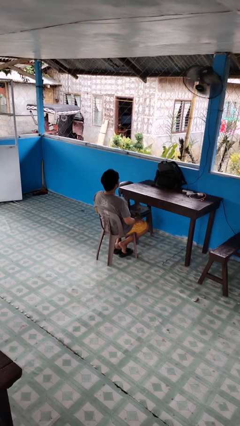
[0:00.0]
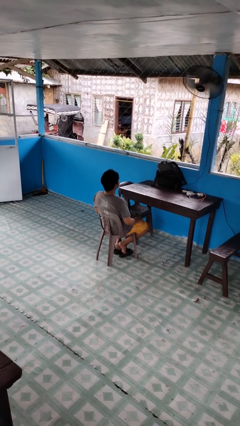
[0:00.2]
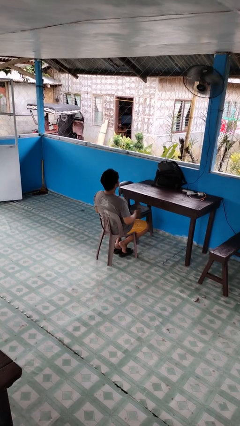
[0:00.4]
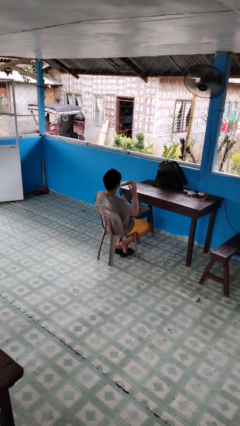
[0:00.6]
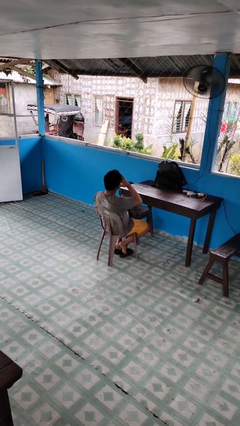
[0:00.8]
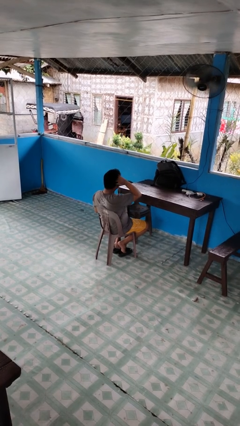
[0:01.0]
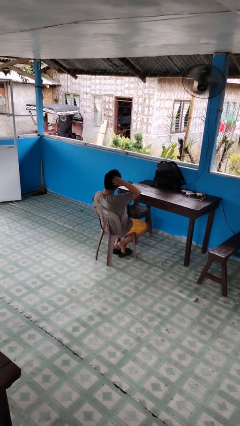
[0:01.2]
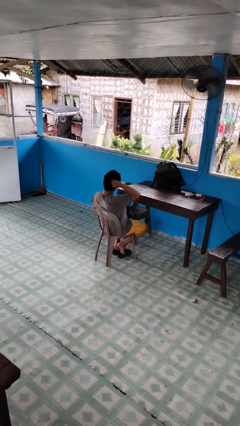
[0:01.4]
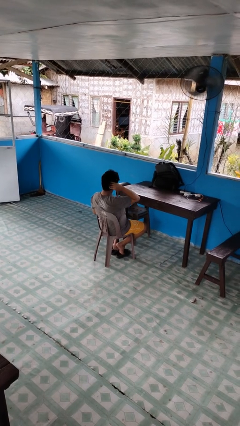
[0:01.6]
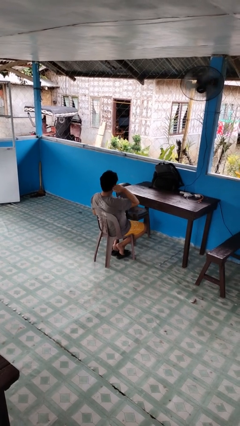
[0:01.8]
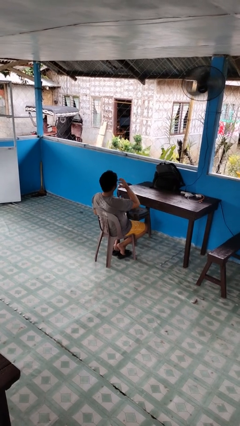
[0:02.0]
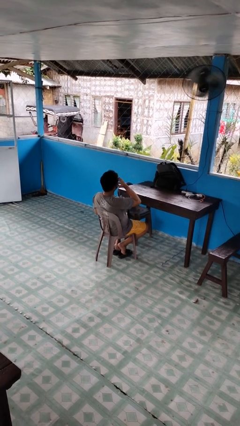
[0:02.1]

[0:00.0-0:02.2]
person strokes hair

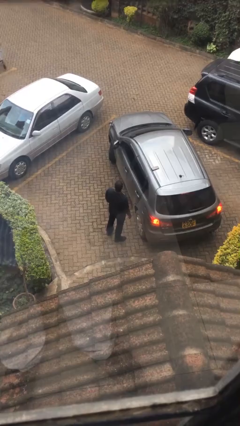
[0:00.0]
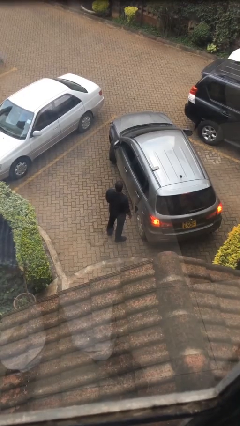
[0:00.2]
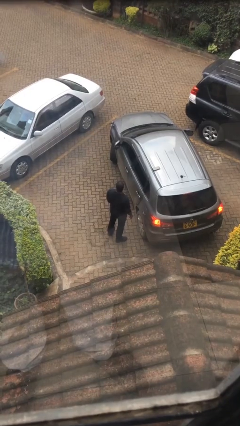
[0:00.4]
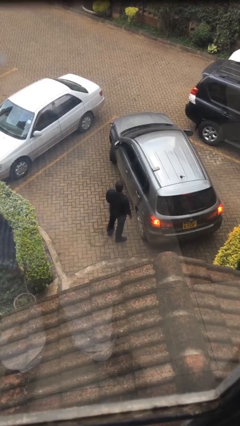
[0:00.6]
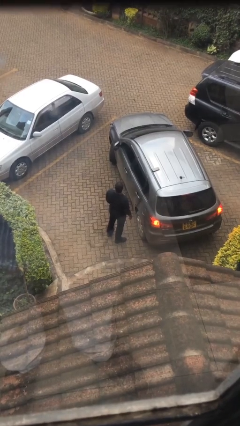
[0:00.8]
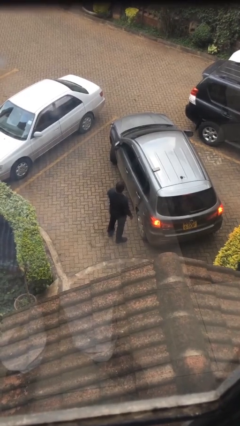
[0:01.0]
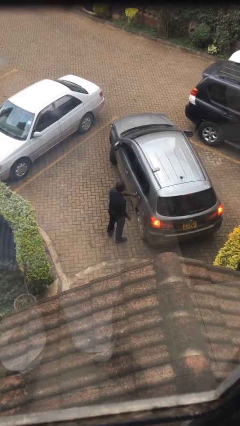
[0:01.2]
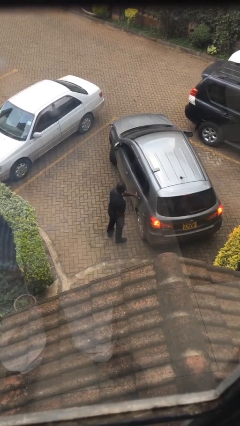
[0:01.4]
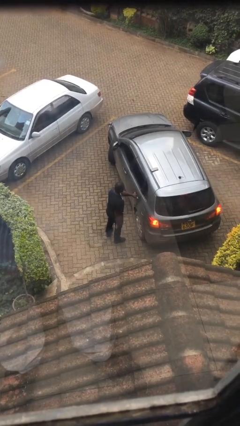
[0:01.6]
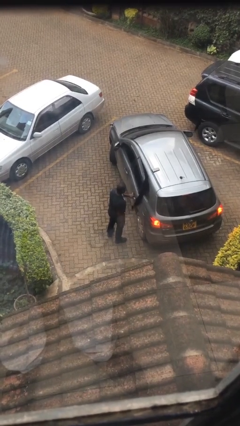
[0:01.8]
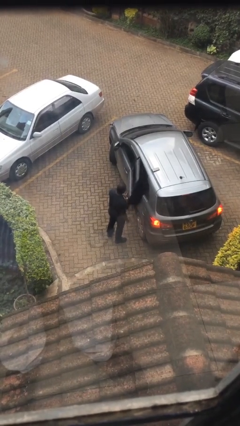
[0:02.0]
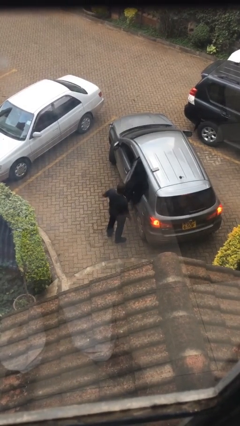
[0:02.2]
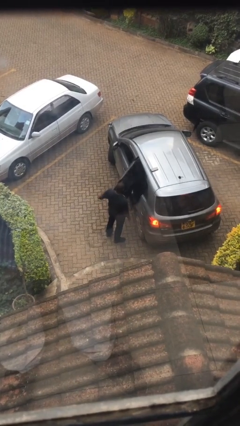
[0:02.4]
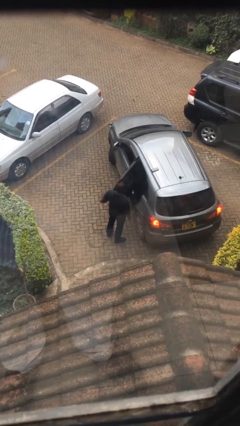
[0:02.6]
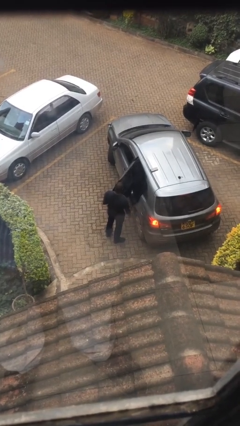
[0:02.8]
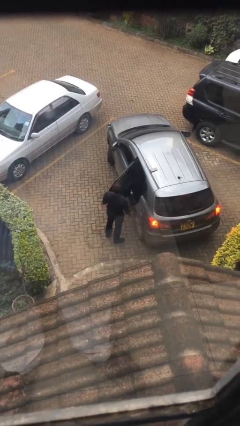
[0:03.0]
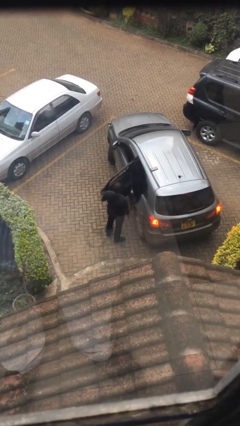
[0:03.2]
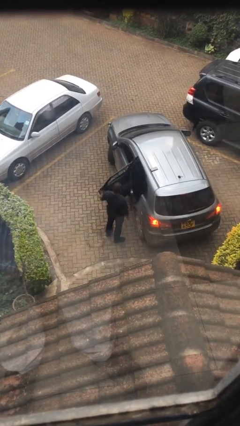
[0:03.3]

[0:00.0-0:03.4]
person opens car door

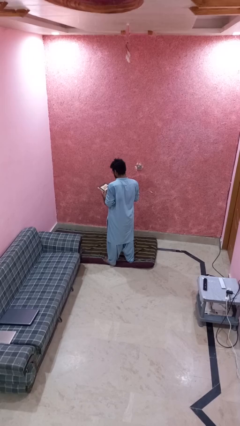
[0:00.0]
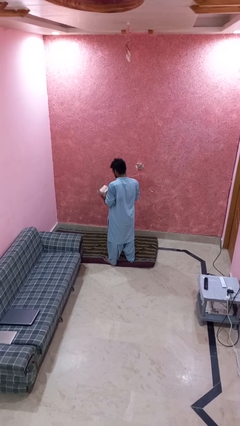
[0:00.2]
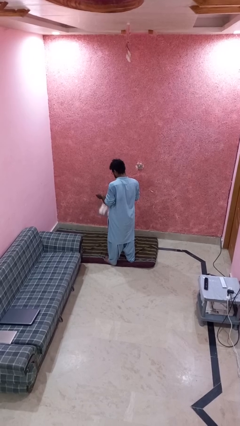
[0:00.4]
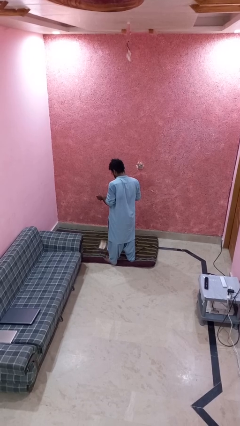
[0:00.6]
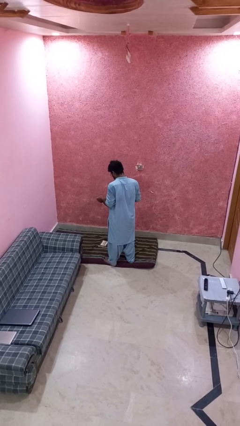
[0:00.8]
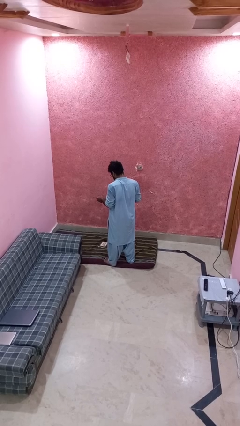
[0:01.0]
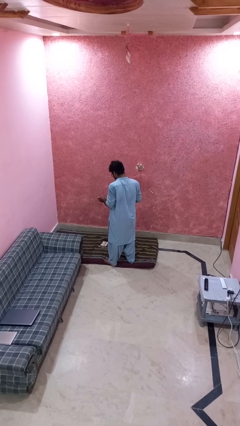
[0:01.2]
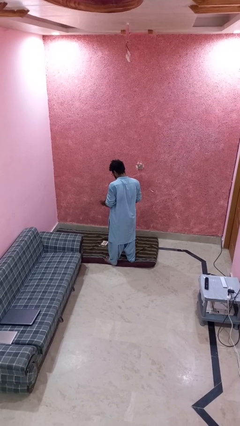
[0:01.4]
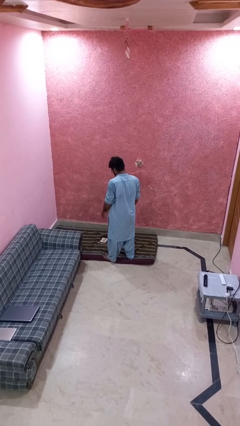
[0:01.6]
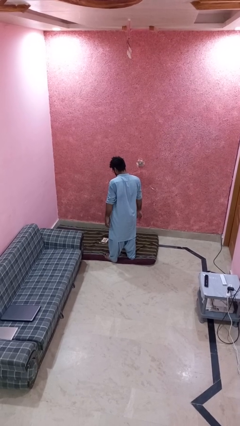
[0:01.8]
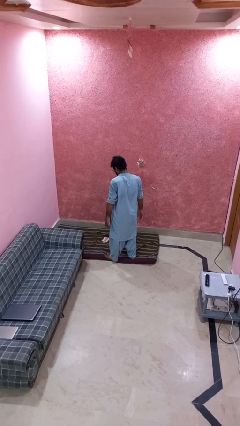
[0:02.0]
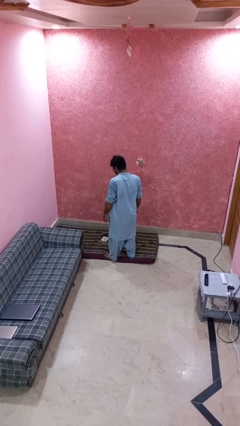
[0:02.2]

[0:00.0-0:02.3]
person drops object

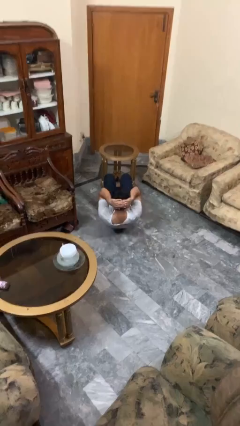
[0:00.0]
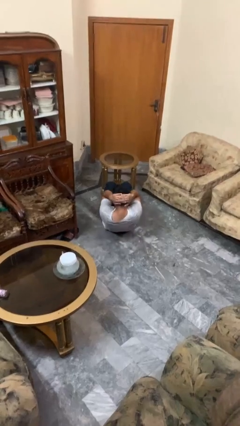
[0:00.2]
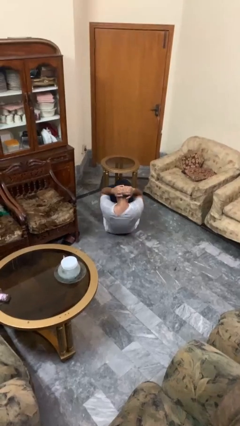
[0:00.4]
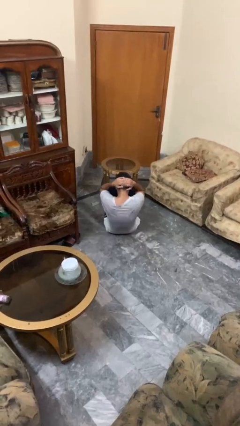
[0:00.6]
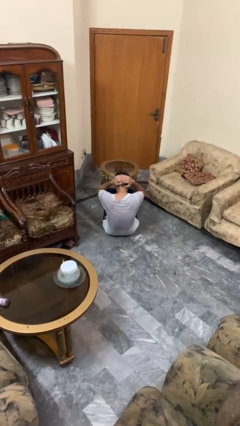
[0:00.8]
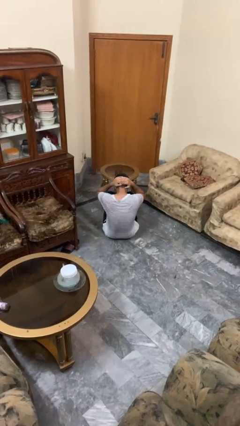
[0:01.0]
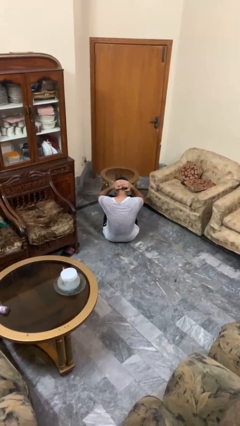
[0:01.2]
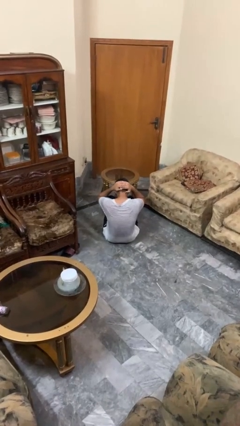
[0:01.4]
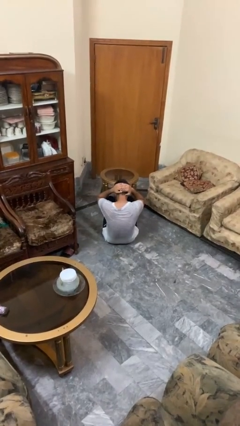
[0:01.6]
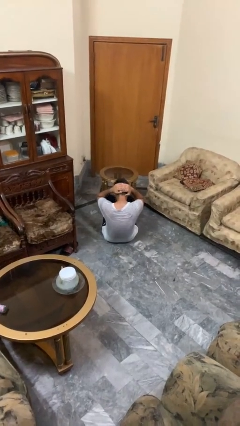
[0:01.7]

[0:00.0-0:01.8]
person exercises with situp

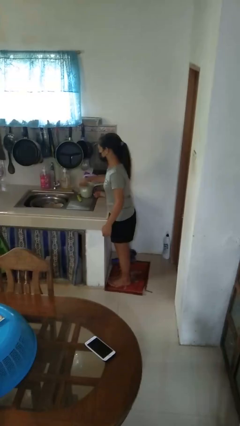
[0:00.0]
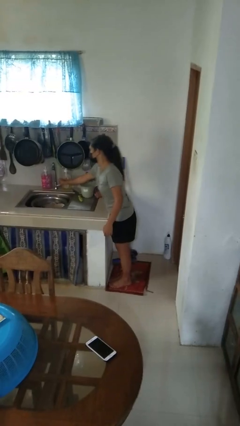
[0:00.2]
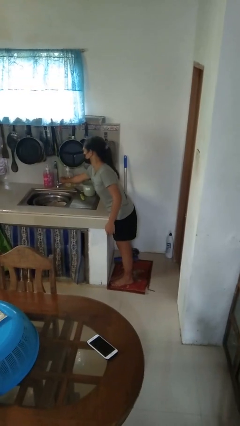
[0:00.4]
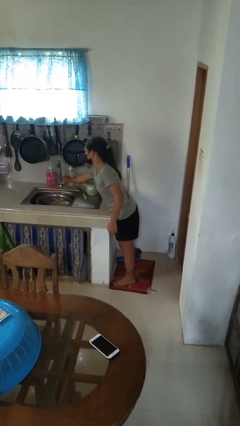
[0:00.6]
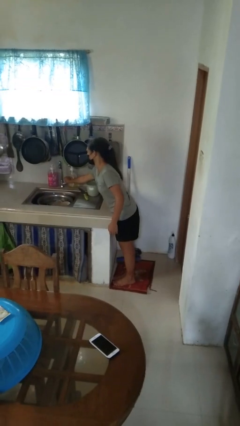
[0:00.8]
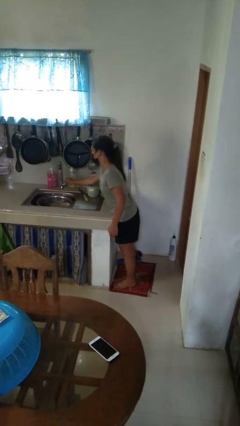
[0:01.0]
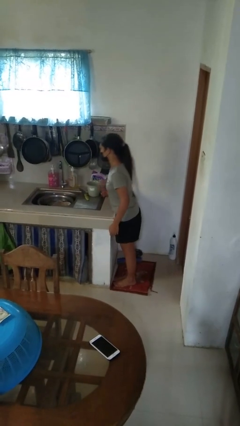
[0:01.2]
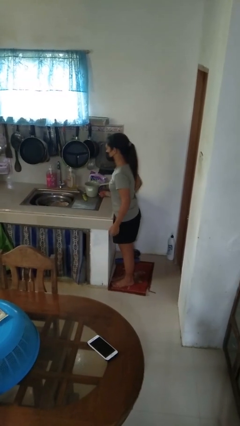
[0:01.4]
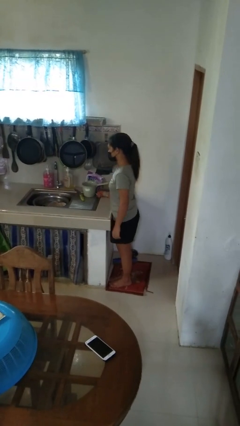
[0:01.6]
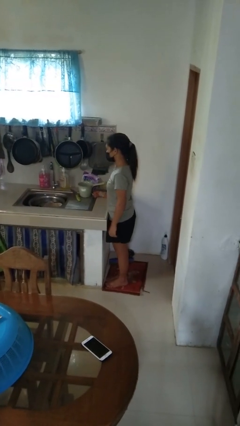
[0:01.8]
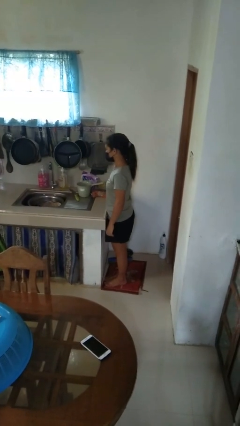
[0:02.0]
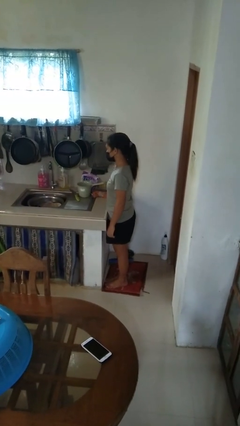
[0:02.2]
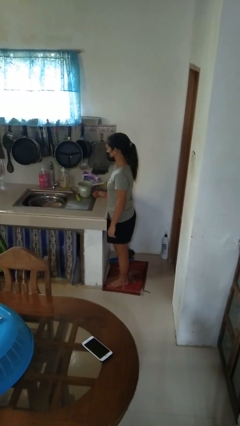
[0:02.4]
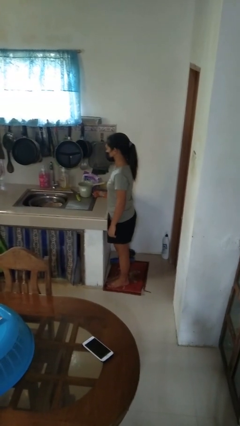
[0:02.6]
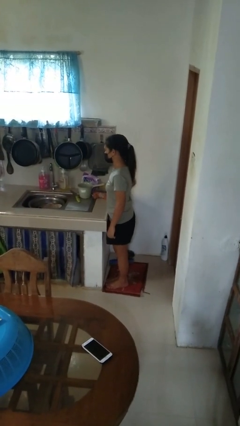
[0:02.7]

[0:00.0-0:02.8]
person turns on faucet

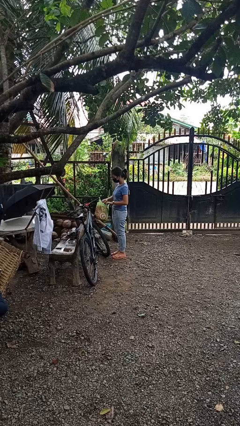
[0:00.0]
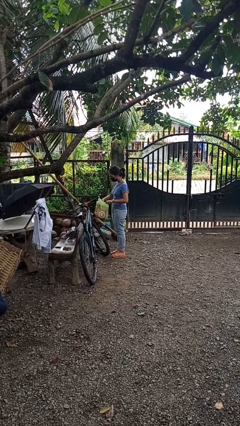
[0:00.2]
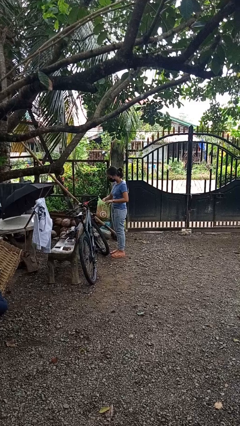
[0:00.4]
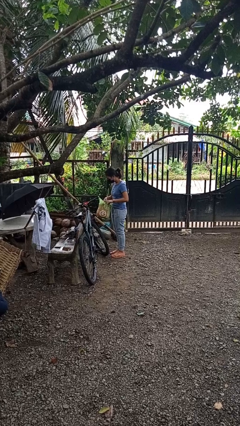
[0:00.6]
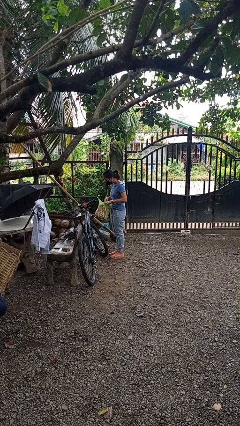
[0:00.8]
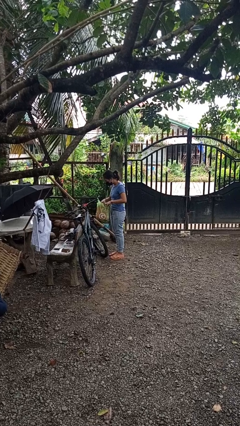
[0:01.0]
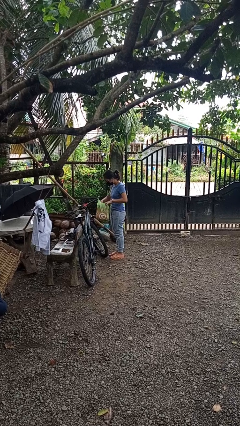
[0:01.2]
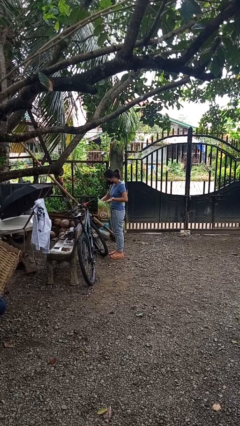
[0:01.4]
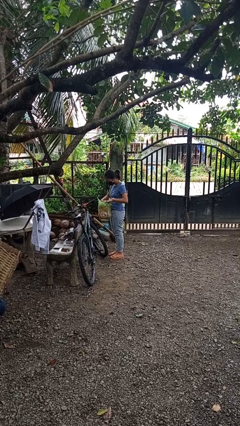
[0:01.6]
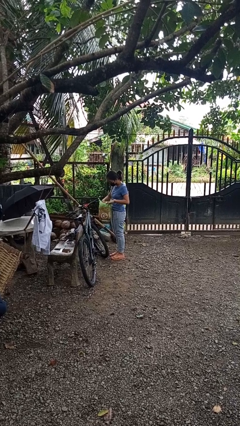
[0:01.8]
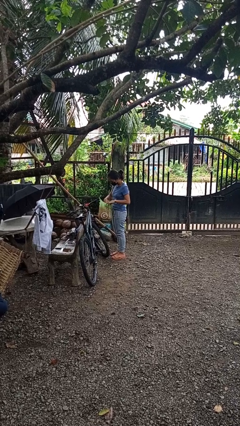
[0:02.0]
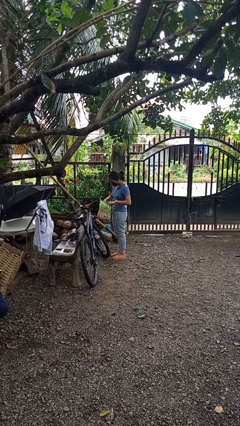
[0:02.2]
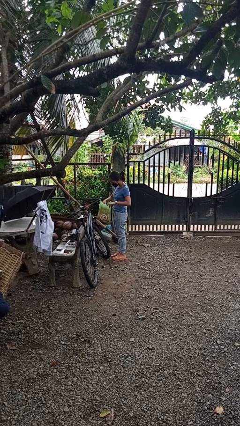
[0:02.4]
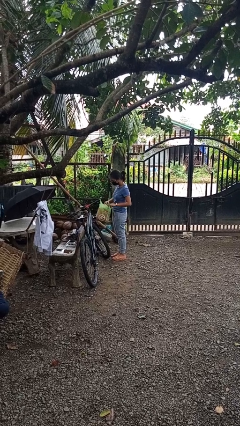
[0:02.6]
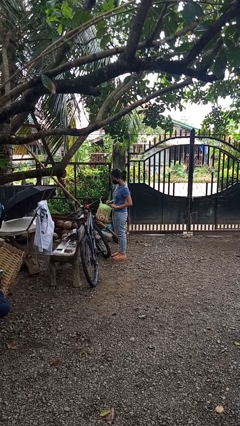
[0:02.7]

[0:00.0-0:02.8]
person searches in bag

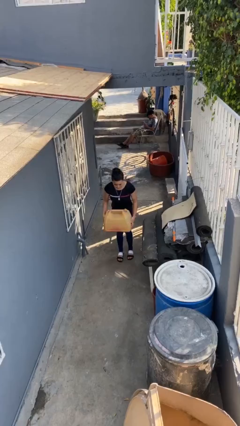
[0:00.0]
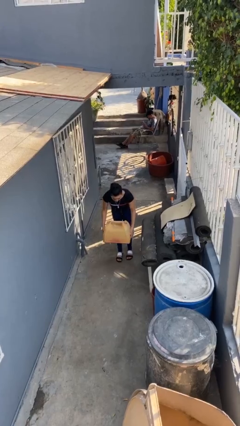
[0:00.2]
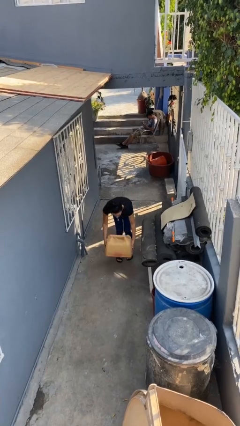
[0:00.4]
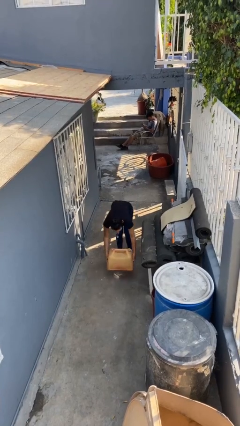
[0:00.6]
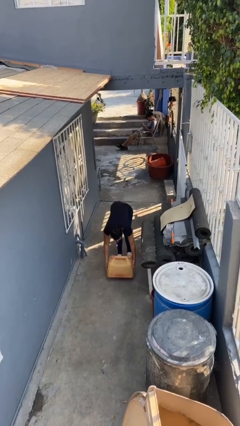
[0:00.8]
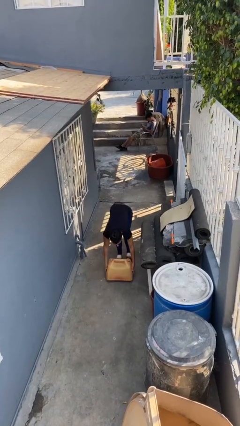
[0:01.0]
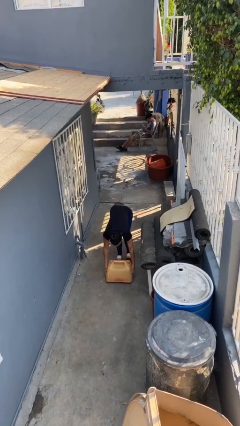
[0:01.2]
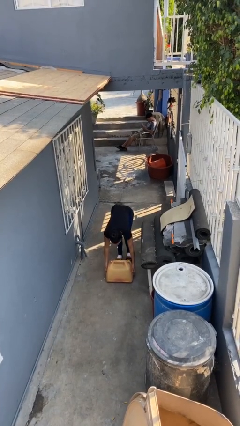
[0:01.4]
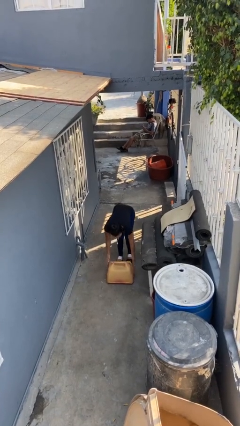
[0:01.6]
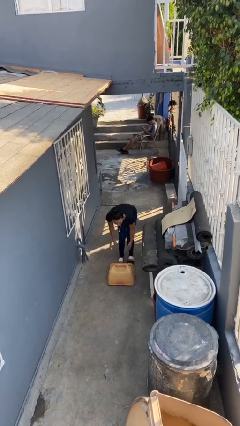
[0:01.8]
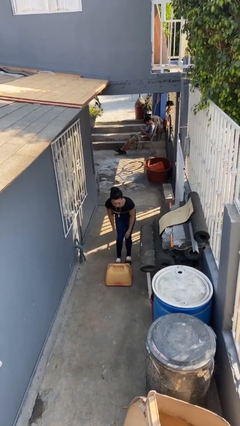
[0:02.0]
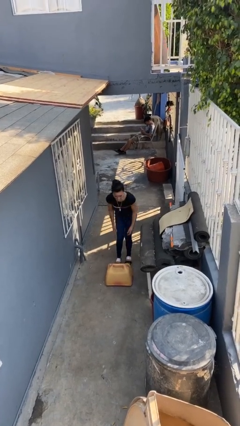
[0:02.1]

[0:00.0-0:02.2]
person puts down object on floor
